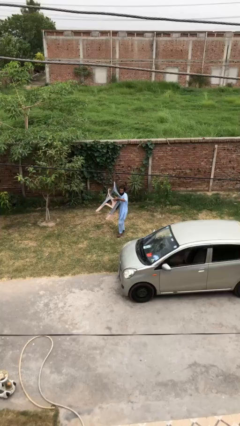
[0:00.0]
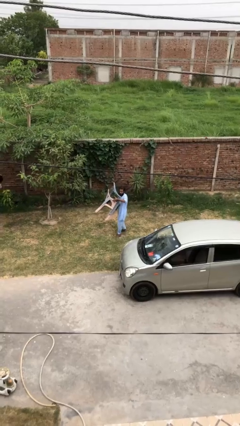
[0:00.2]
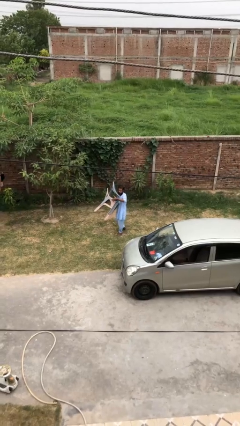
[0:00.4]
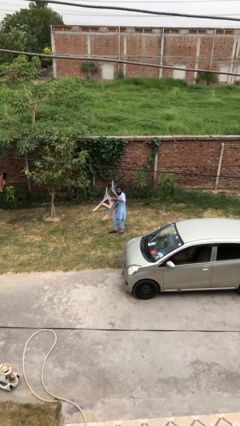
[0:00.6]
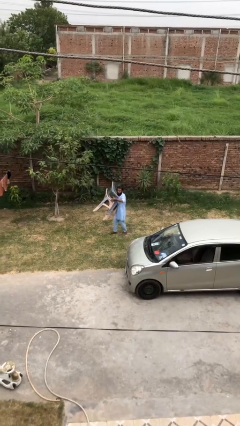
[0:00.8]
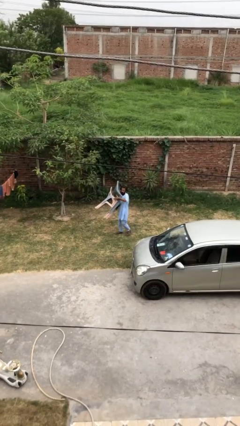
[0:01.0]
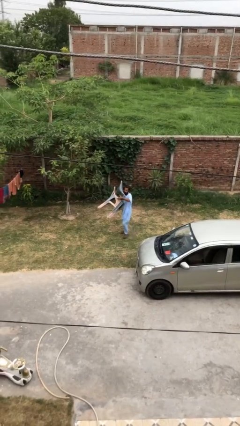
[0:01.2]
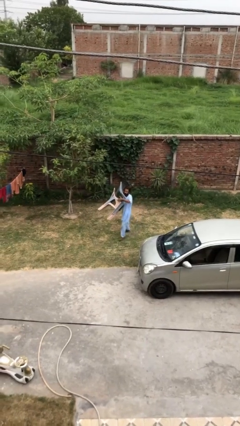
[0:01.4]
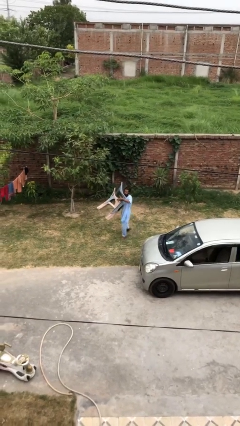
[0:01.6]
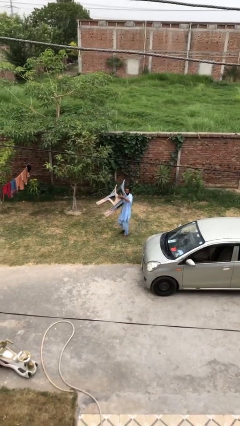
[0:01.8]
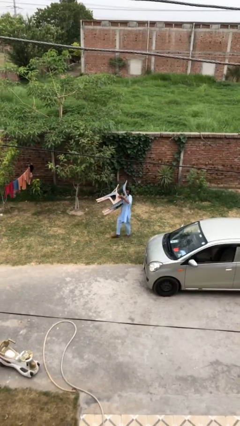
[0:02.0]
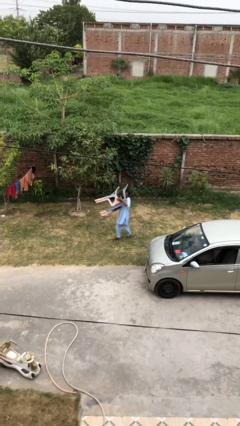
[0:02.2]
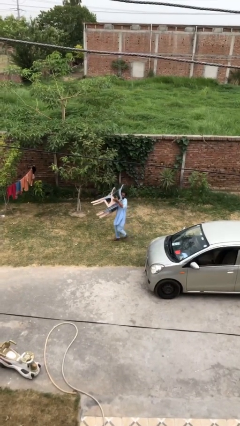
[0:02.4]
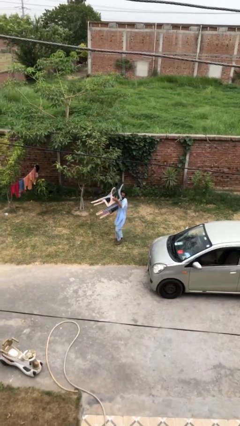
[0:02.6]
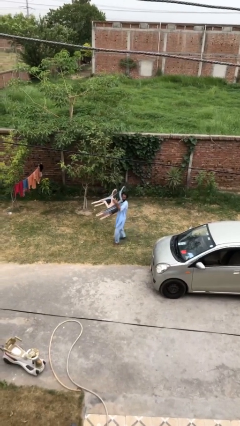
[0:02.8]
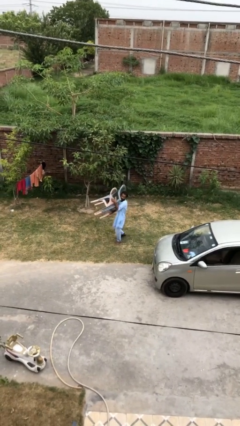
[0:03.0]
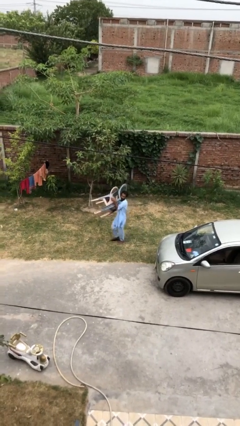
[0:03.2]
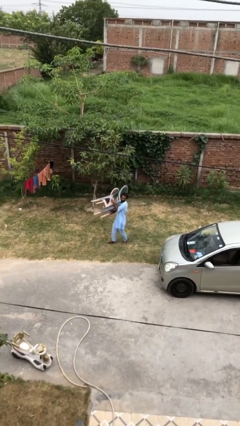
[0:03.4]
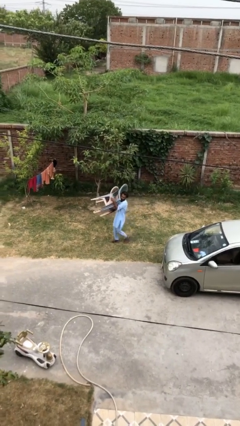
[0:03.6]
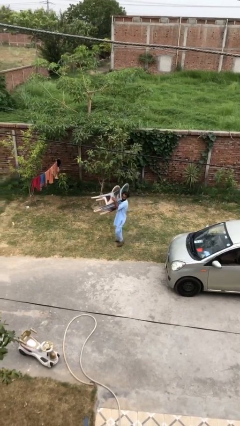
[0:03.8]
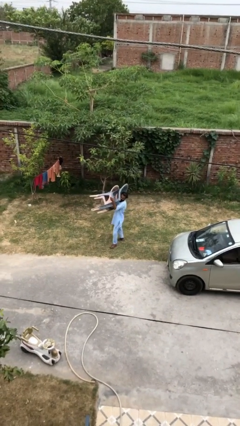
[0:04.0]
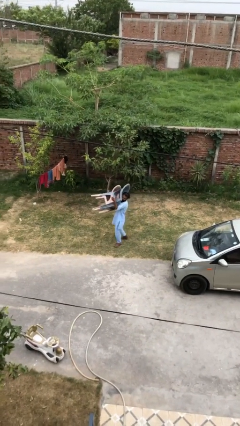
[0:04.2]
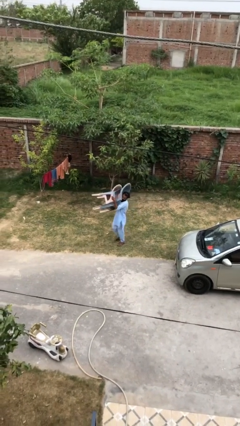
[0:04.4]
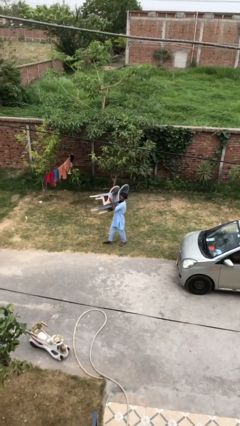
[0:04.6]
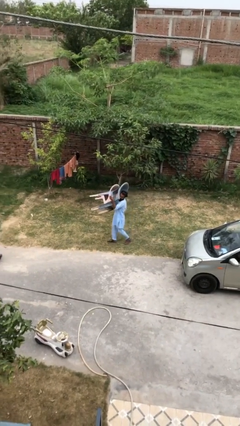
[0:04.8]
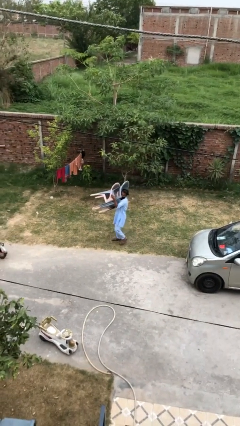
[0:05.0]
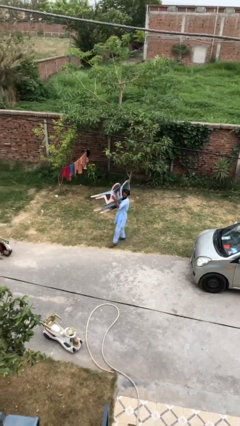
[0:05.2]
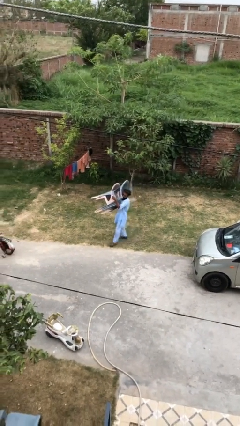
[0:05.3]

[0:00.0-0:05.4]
person carries heavy object

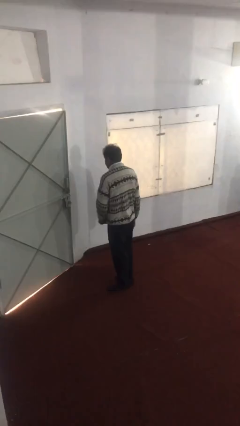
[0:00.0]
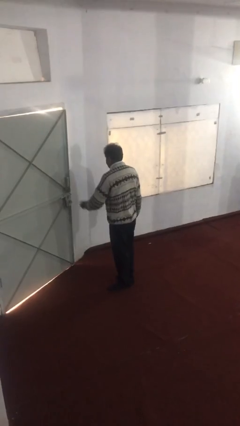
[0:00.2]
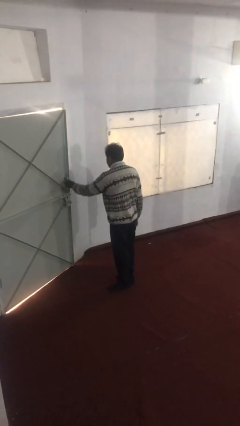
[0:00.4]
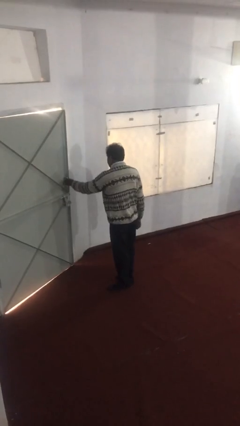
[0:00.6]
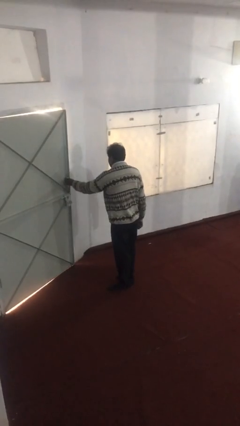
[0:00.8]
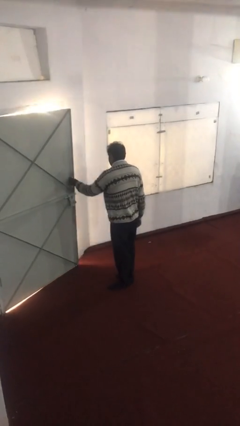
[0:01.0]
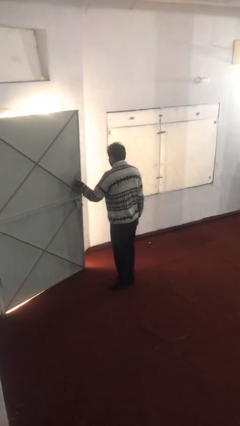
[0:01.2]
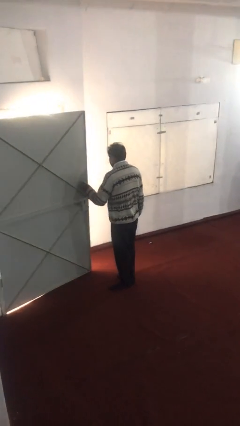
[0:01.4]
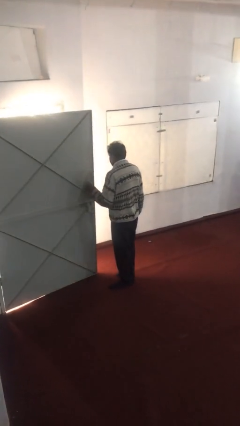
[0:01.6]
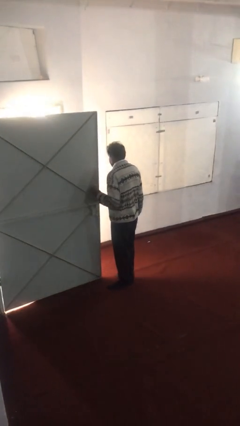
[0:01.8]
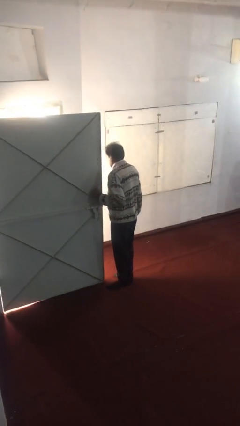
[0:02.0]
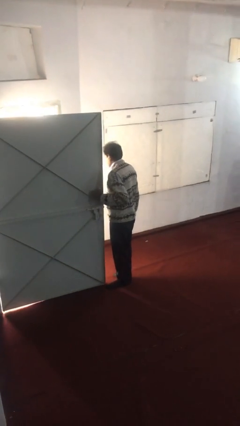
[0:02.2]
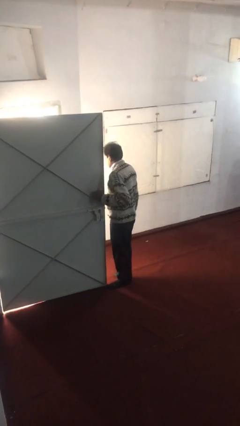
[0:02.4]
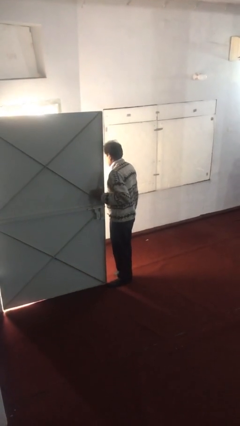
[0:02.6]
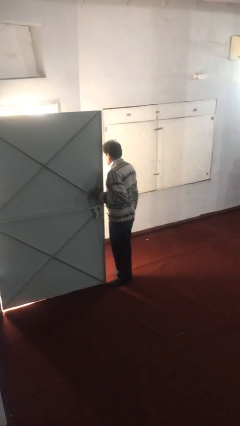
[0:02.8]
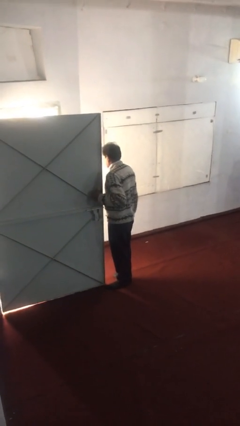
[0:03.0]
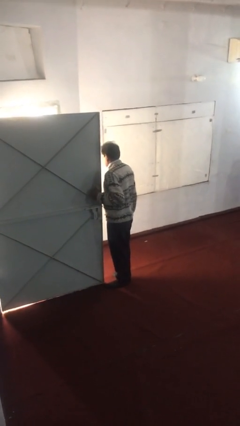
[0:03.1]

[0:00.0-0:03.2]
person opens facility door

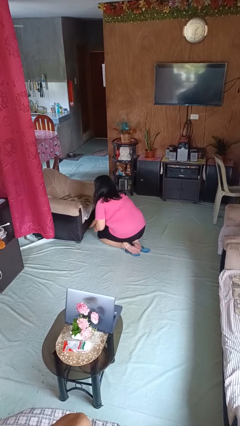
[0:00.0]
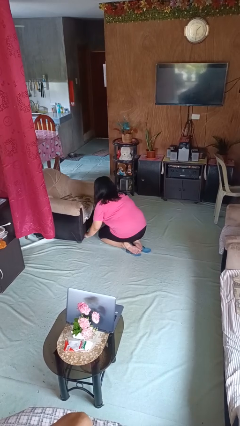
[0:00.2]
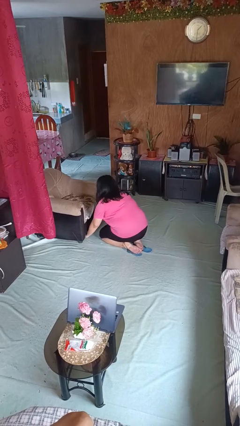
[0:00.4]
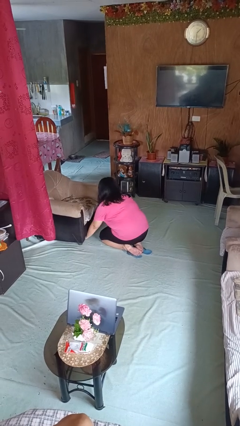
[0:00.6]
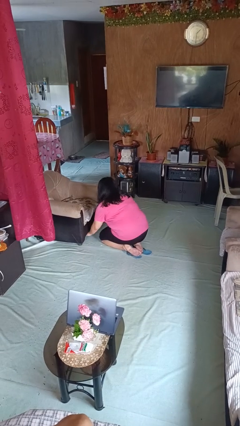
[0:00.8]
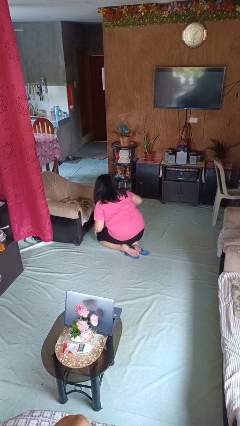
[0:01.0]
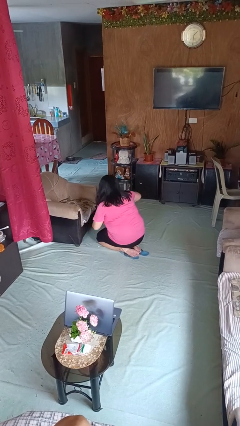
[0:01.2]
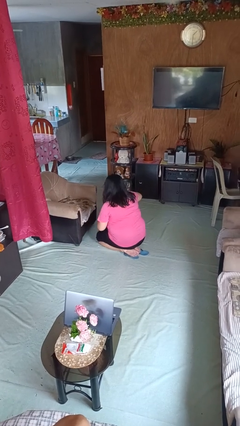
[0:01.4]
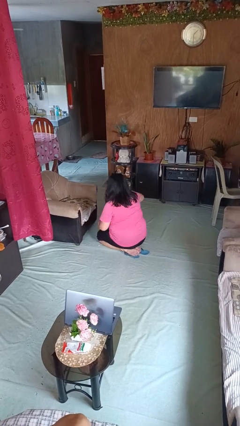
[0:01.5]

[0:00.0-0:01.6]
person searches under couch

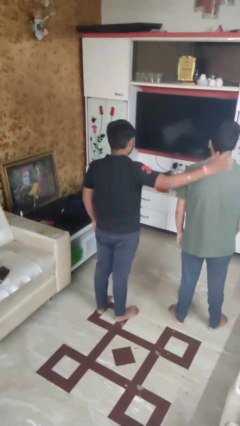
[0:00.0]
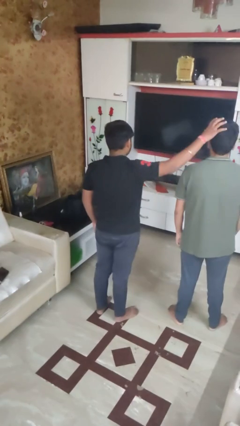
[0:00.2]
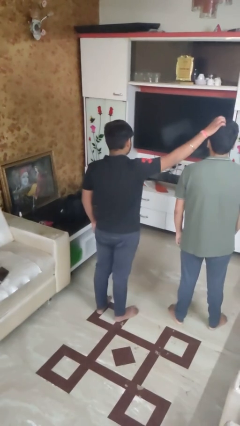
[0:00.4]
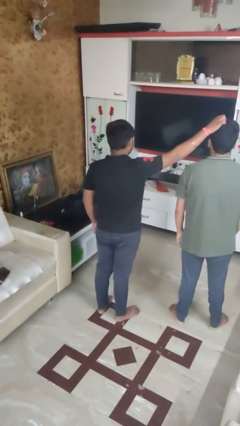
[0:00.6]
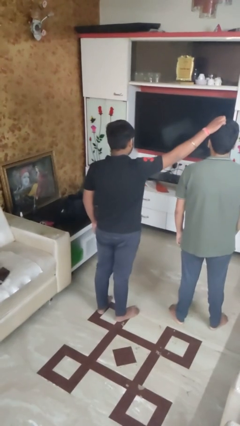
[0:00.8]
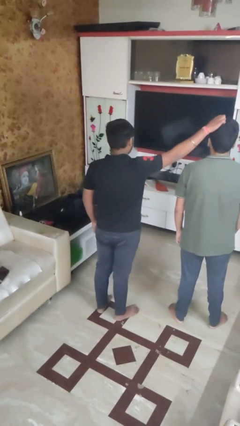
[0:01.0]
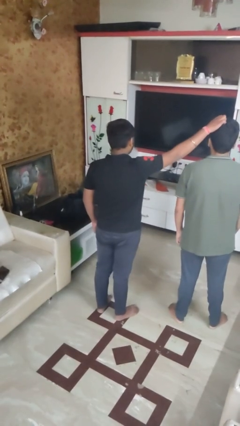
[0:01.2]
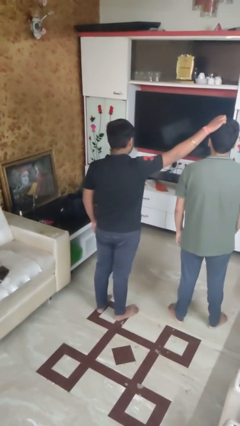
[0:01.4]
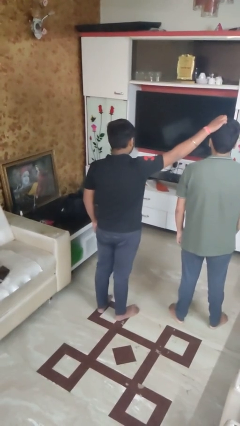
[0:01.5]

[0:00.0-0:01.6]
person grabs person by hair

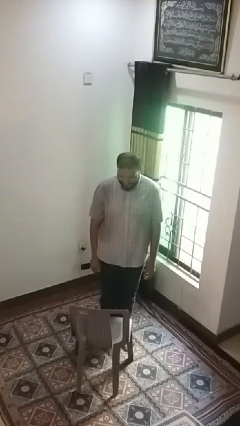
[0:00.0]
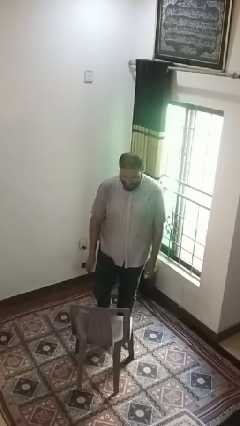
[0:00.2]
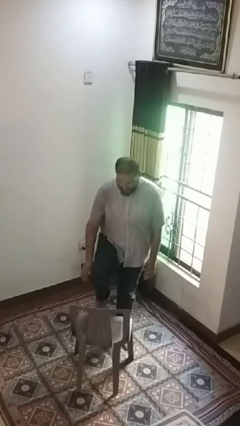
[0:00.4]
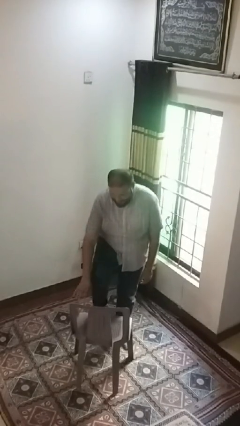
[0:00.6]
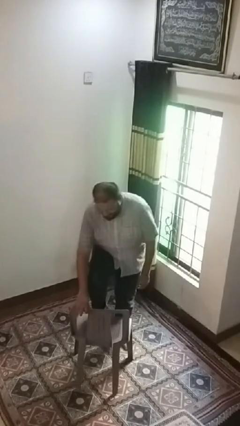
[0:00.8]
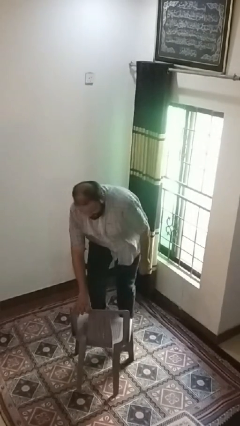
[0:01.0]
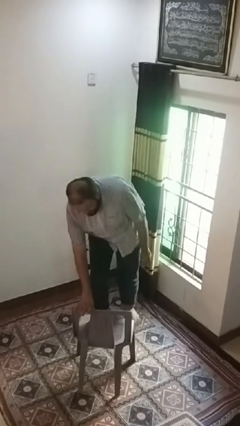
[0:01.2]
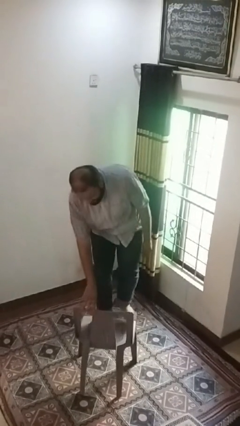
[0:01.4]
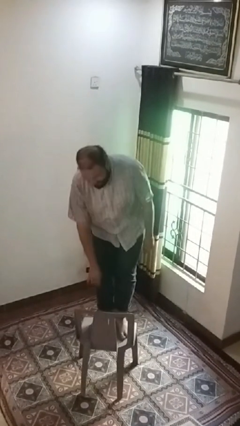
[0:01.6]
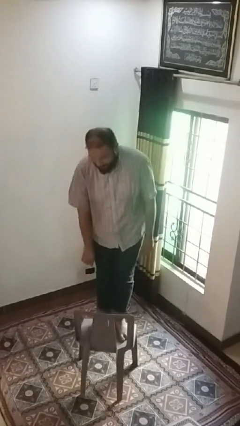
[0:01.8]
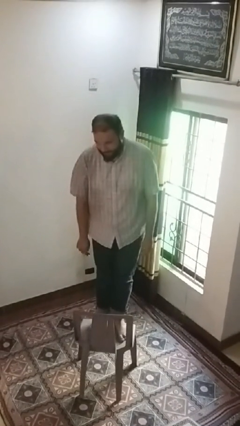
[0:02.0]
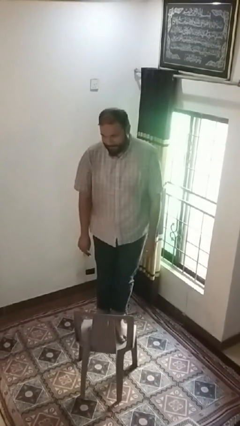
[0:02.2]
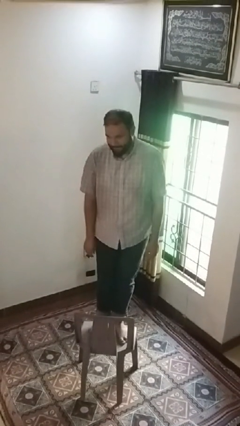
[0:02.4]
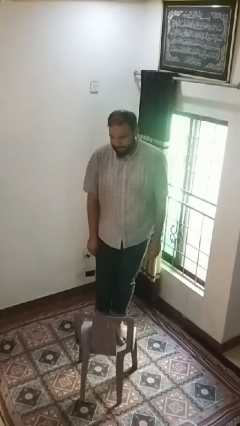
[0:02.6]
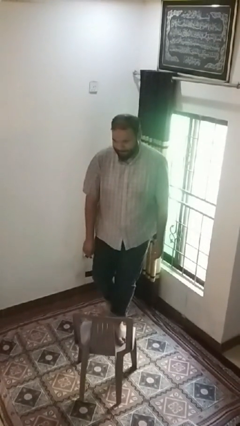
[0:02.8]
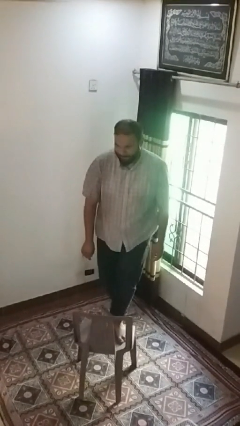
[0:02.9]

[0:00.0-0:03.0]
person climbs on chair

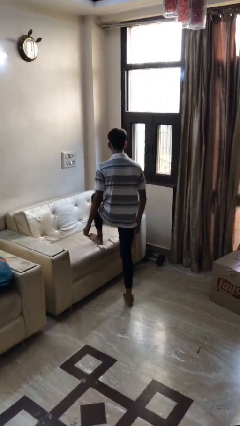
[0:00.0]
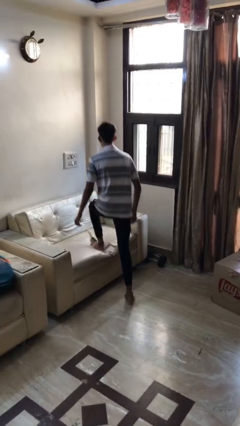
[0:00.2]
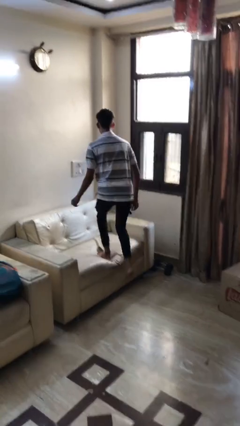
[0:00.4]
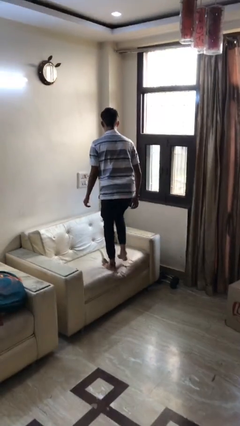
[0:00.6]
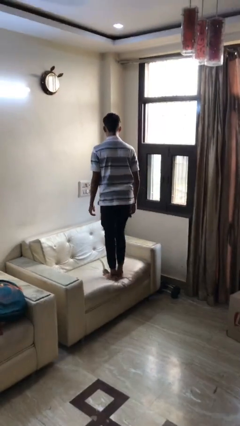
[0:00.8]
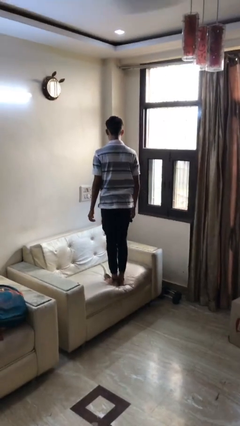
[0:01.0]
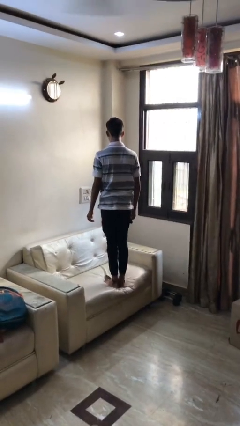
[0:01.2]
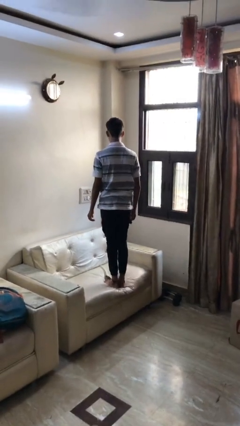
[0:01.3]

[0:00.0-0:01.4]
person climbs on couch

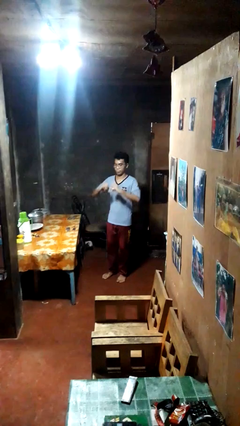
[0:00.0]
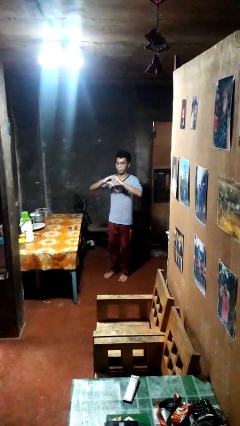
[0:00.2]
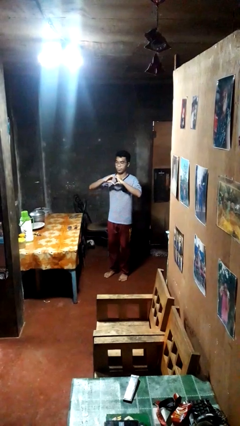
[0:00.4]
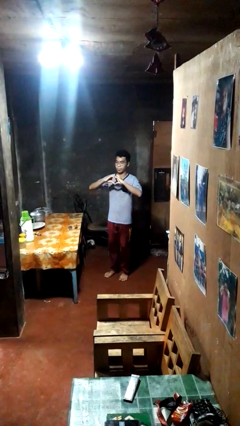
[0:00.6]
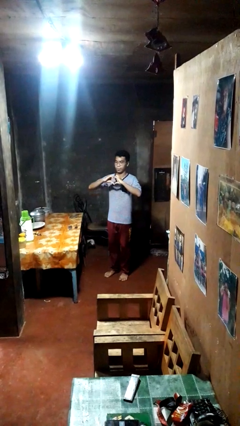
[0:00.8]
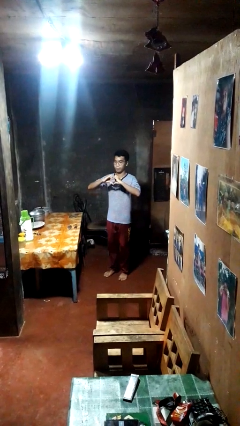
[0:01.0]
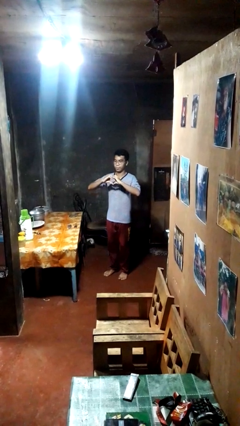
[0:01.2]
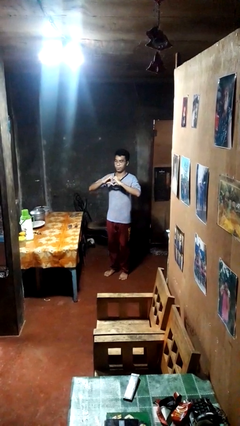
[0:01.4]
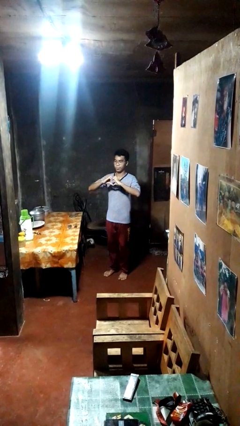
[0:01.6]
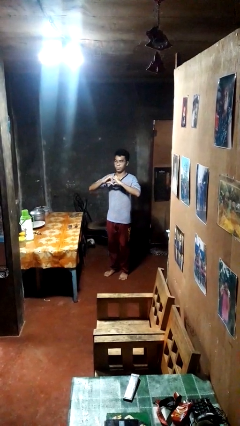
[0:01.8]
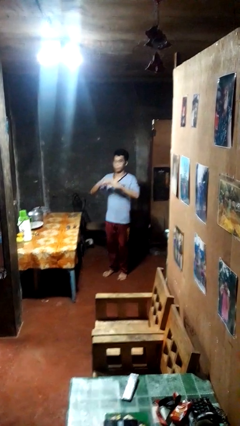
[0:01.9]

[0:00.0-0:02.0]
person gestures heart
